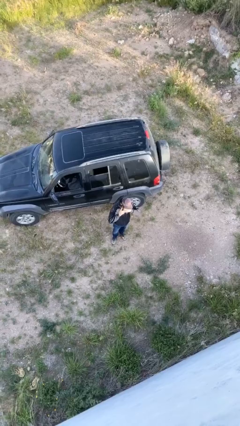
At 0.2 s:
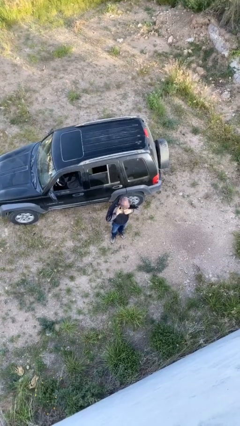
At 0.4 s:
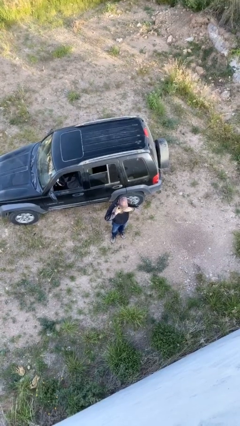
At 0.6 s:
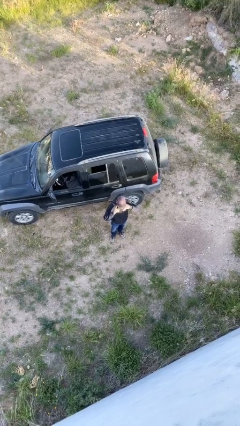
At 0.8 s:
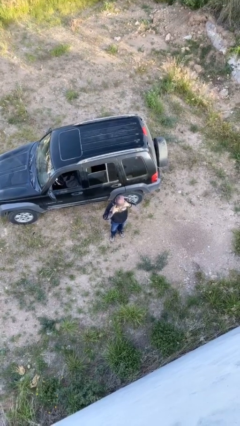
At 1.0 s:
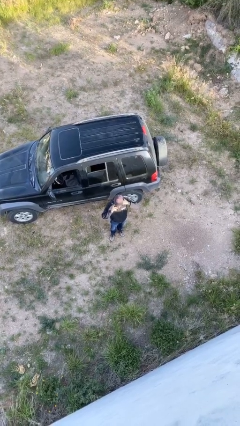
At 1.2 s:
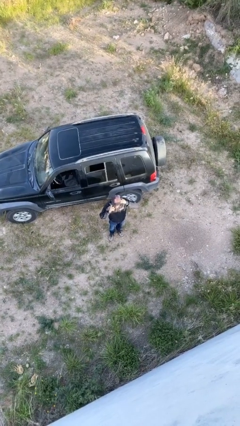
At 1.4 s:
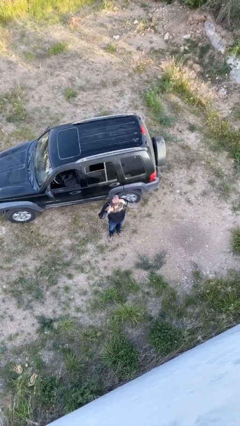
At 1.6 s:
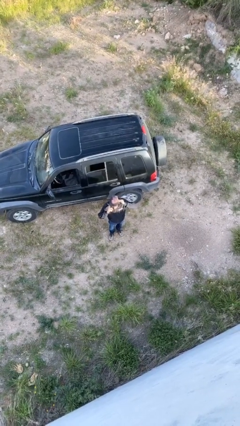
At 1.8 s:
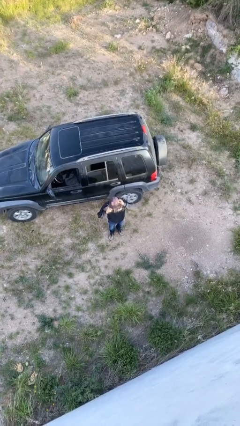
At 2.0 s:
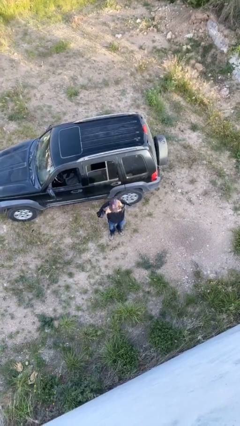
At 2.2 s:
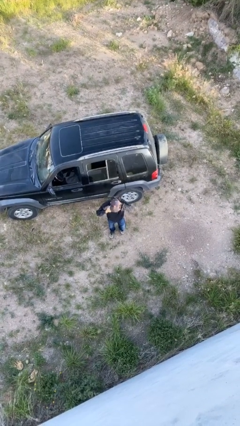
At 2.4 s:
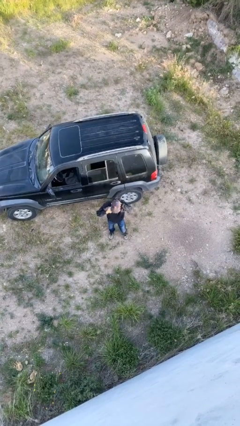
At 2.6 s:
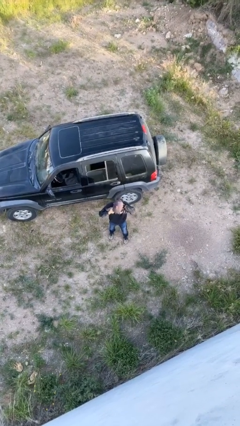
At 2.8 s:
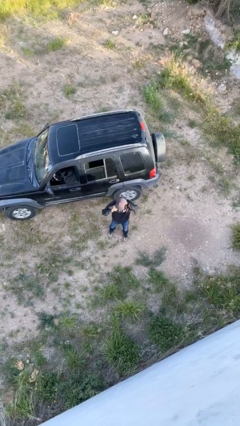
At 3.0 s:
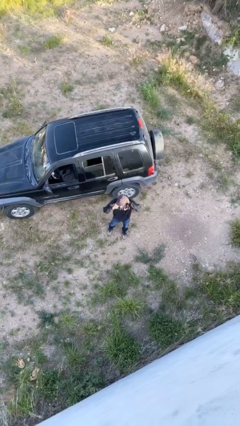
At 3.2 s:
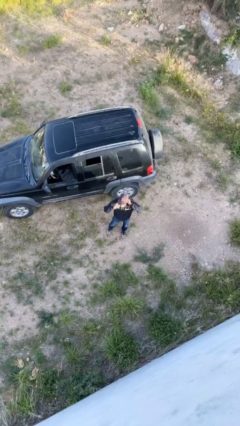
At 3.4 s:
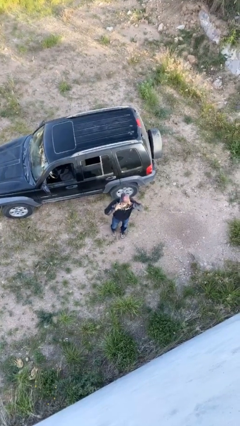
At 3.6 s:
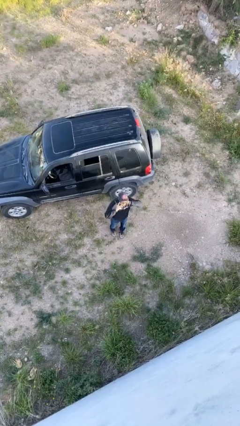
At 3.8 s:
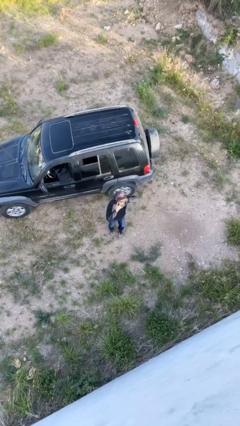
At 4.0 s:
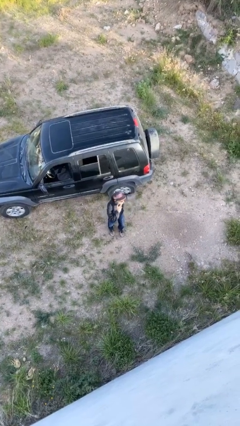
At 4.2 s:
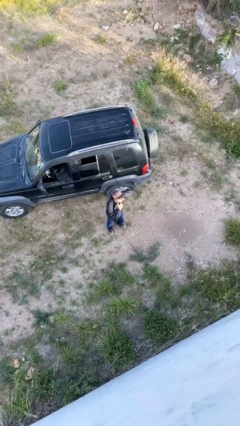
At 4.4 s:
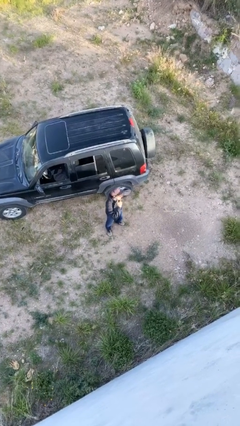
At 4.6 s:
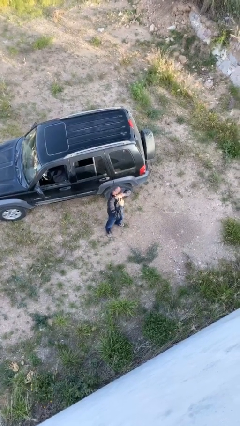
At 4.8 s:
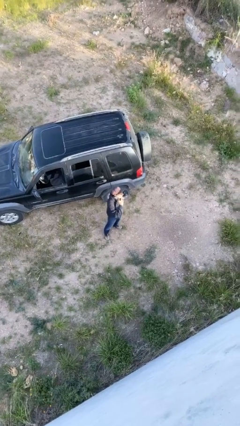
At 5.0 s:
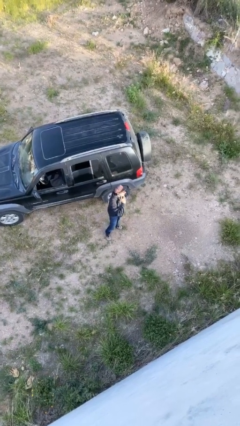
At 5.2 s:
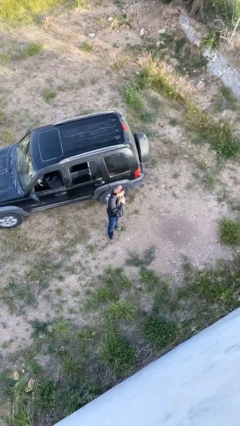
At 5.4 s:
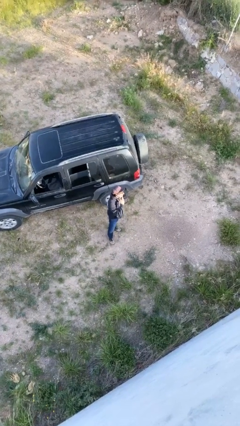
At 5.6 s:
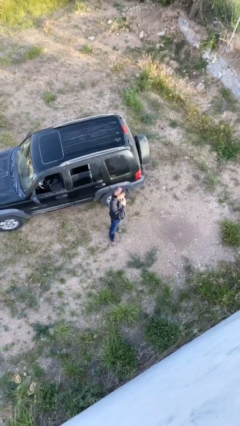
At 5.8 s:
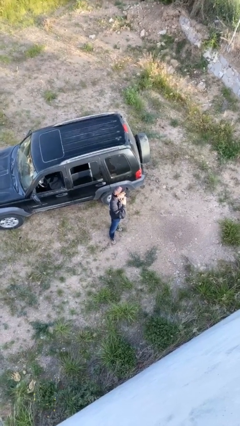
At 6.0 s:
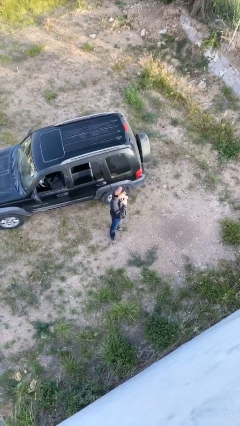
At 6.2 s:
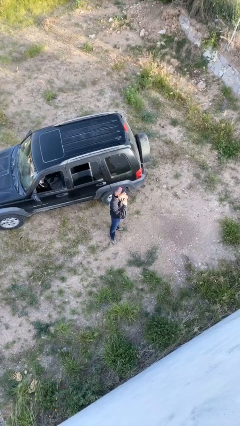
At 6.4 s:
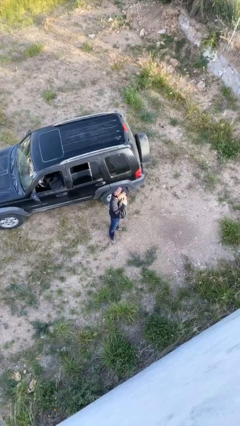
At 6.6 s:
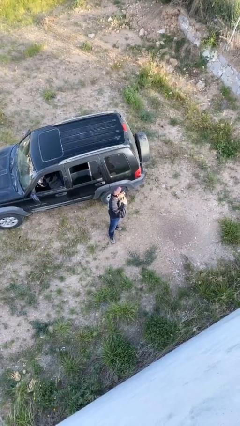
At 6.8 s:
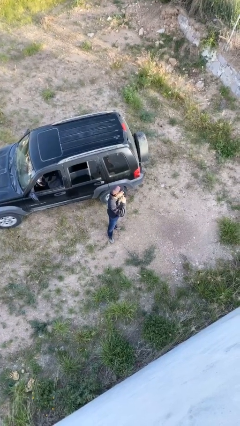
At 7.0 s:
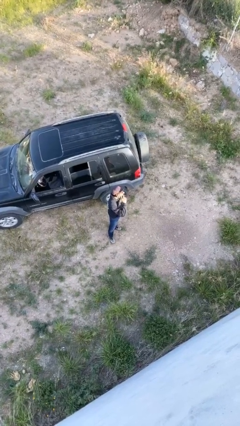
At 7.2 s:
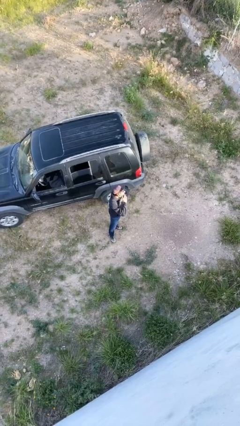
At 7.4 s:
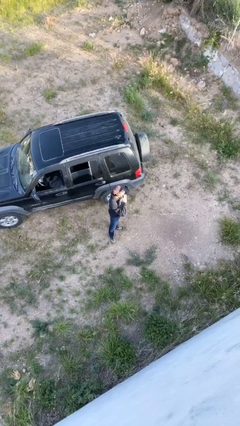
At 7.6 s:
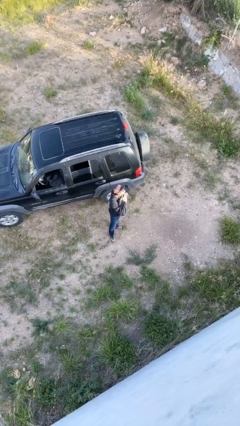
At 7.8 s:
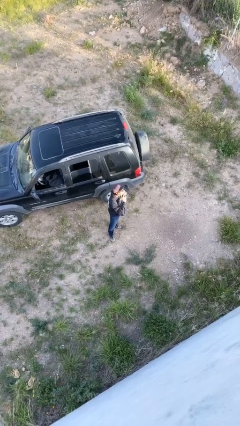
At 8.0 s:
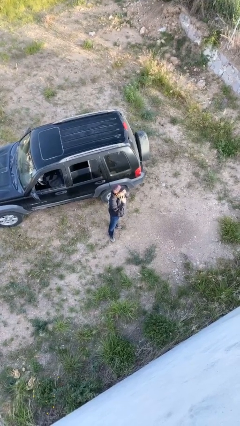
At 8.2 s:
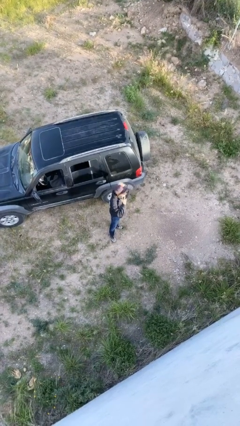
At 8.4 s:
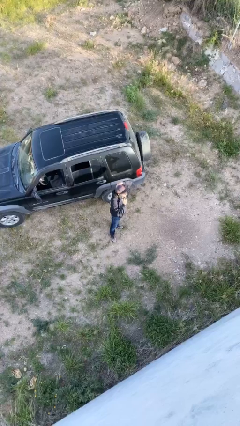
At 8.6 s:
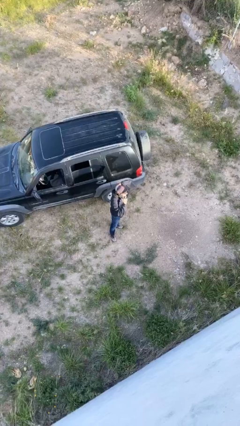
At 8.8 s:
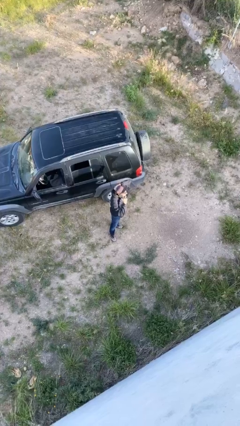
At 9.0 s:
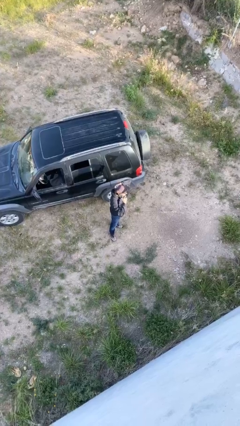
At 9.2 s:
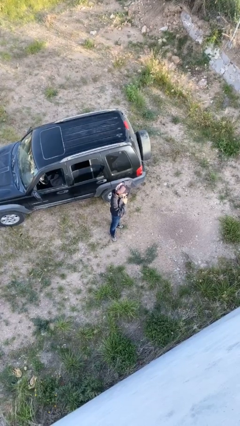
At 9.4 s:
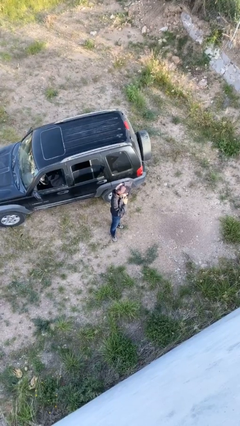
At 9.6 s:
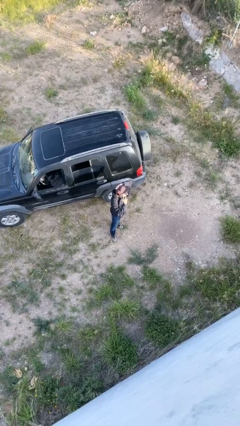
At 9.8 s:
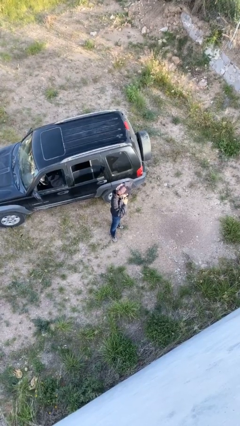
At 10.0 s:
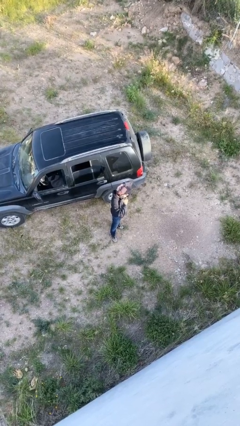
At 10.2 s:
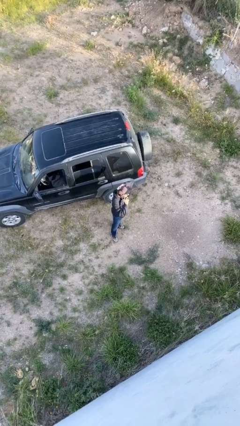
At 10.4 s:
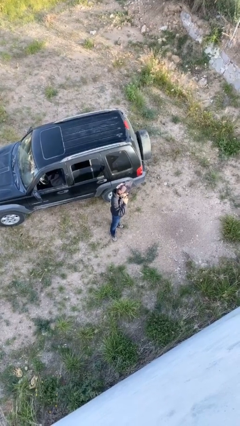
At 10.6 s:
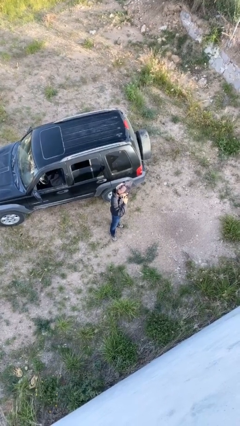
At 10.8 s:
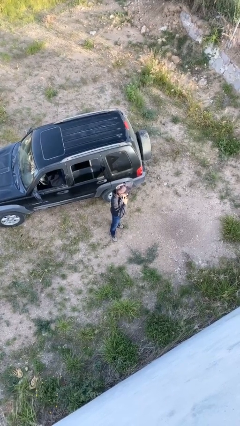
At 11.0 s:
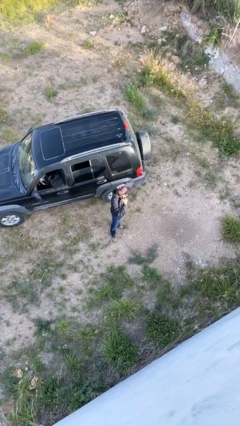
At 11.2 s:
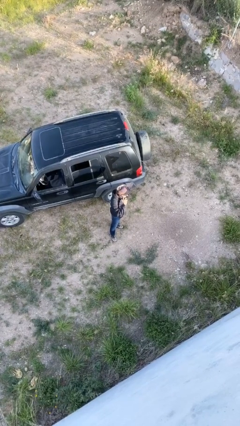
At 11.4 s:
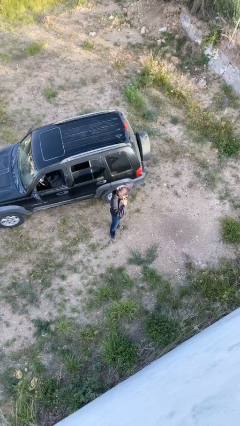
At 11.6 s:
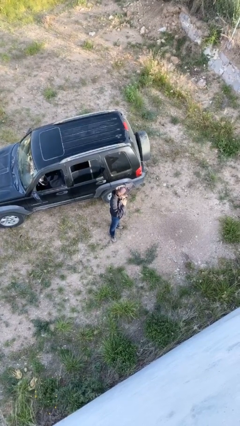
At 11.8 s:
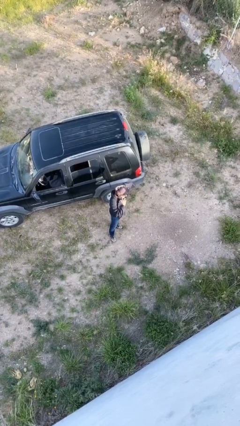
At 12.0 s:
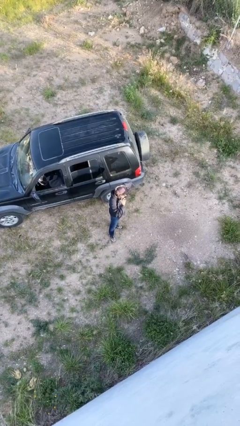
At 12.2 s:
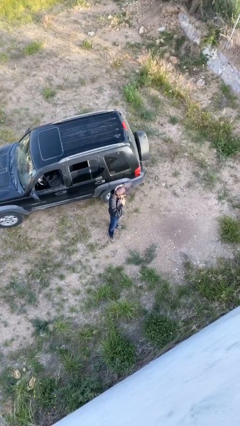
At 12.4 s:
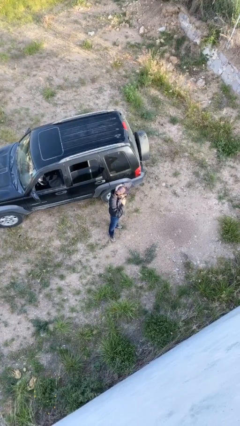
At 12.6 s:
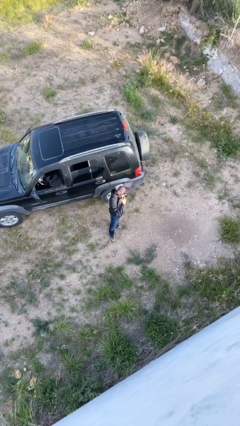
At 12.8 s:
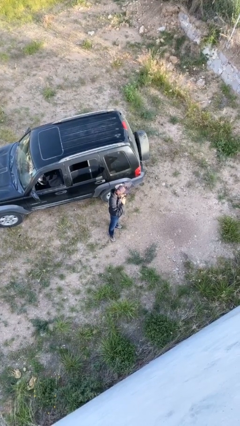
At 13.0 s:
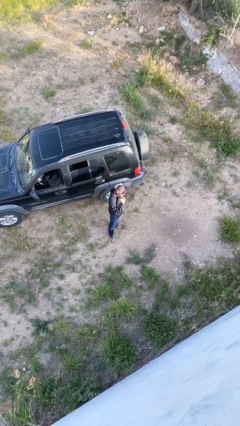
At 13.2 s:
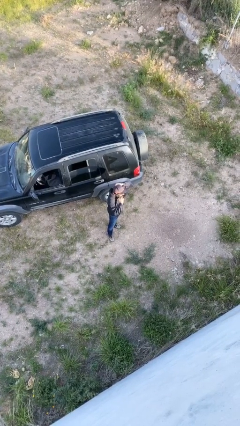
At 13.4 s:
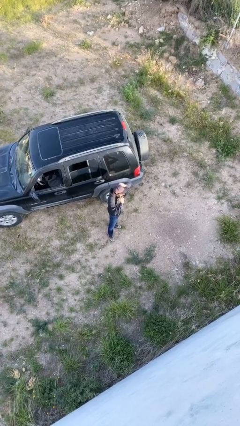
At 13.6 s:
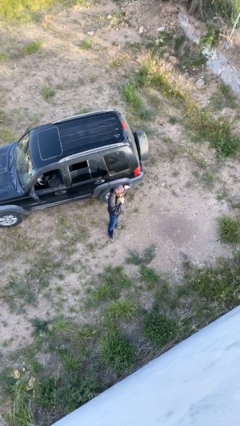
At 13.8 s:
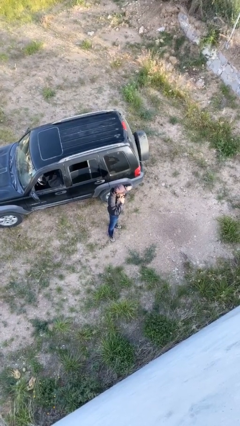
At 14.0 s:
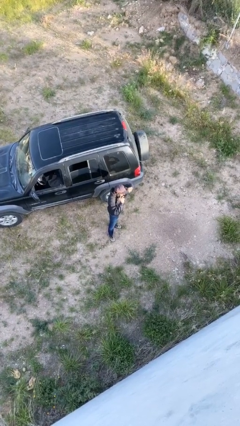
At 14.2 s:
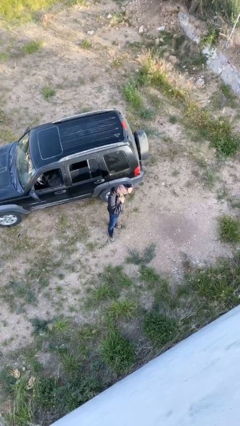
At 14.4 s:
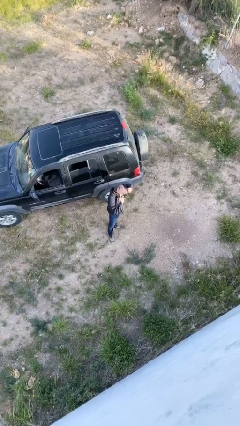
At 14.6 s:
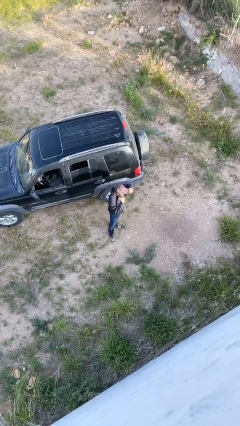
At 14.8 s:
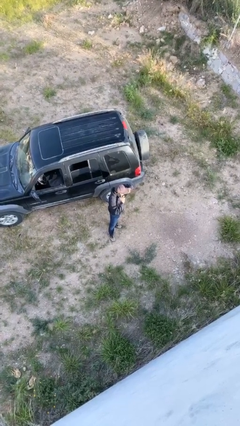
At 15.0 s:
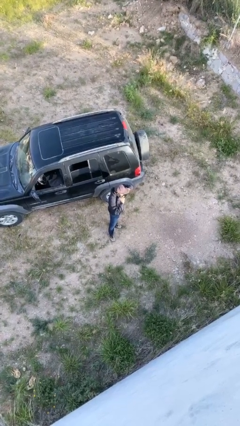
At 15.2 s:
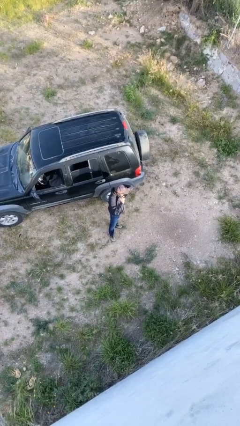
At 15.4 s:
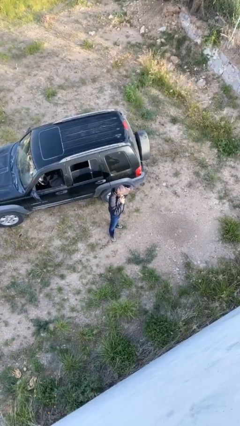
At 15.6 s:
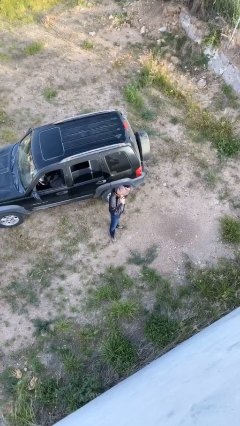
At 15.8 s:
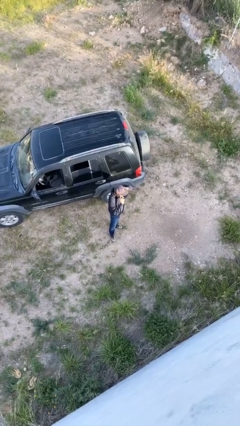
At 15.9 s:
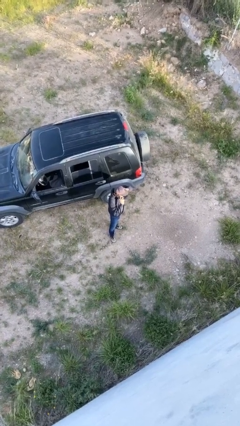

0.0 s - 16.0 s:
person talks on phone

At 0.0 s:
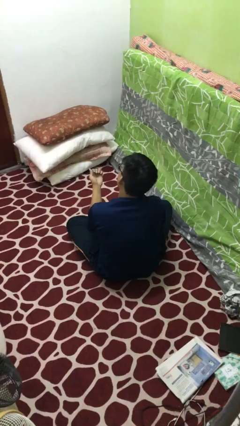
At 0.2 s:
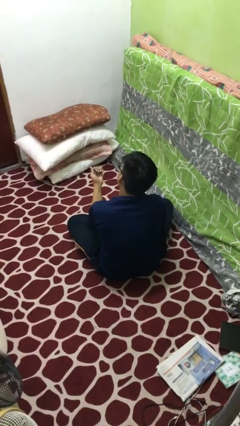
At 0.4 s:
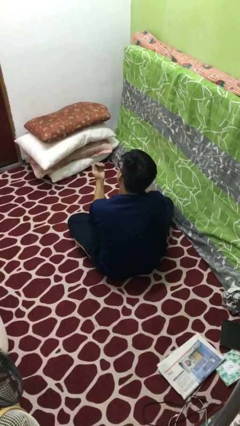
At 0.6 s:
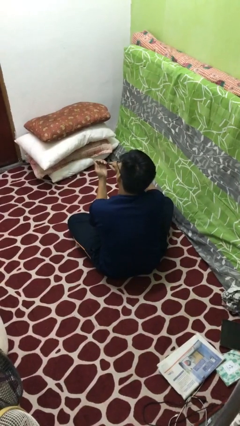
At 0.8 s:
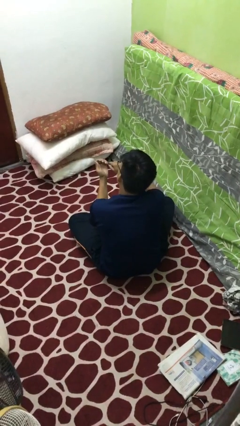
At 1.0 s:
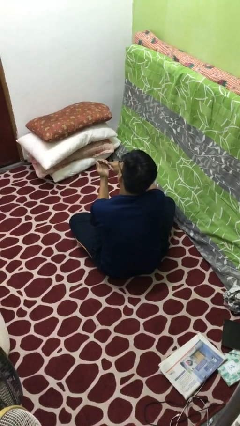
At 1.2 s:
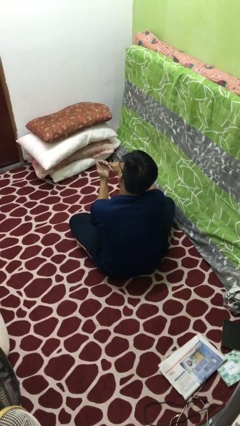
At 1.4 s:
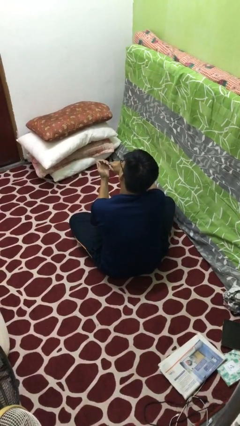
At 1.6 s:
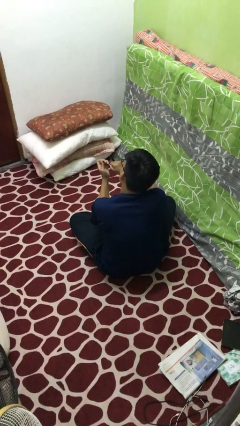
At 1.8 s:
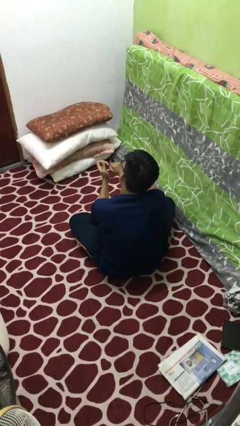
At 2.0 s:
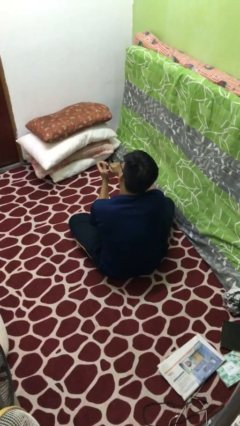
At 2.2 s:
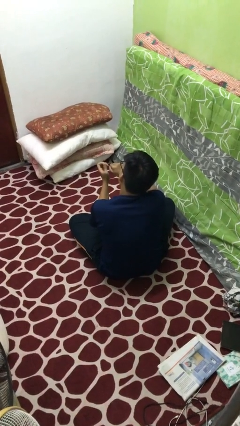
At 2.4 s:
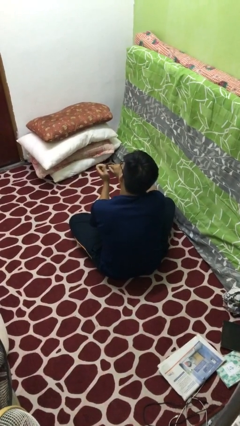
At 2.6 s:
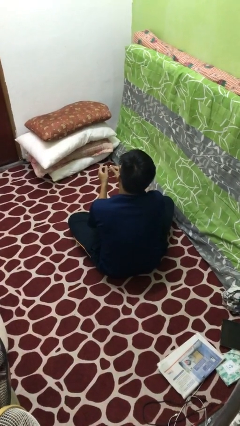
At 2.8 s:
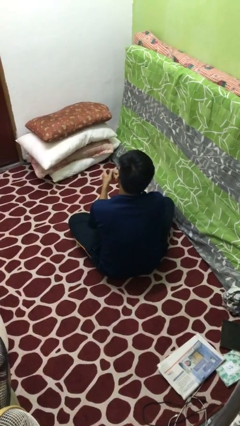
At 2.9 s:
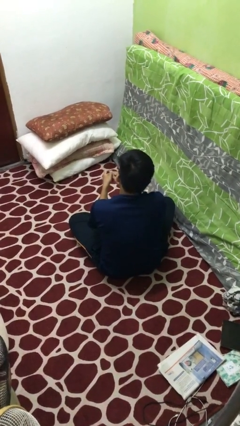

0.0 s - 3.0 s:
person clips fingernails
